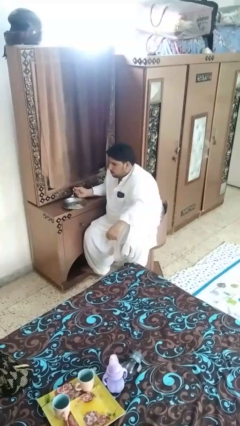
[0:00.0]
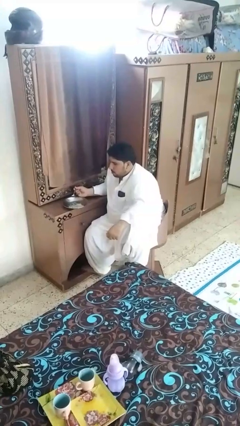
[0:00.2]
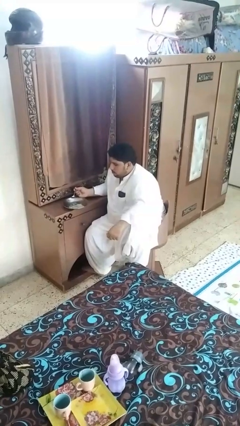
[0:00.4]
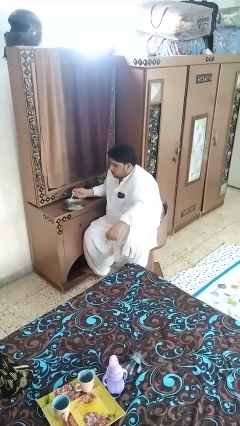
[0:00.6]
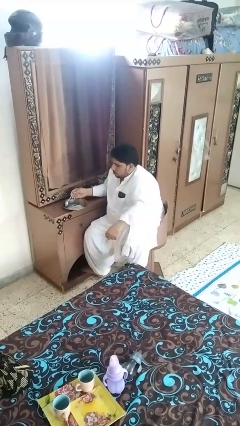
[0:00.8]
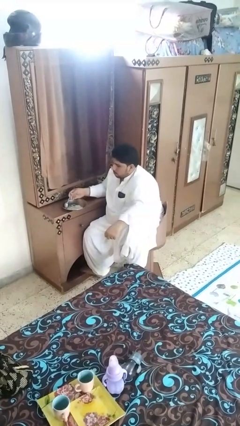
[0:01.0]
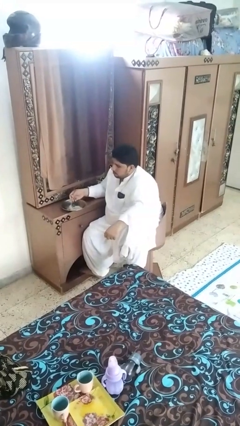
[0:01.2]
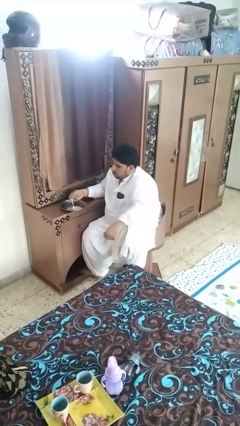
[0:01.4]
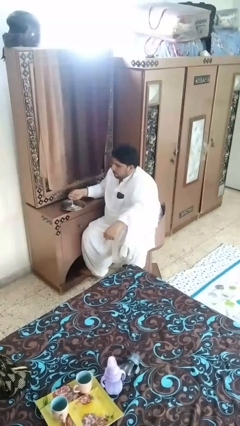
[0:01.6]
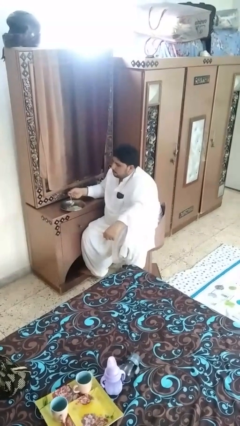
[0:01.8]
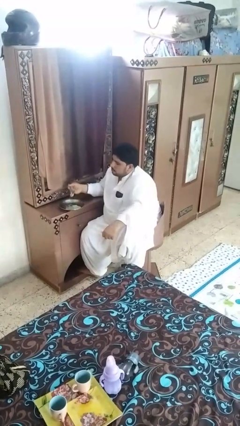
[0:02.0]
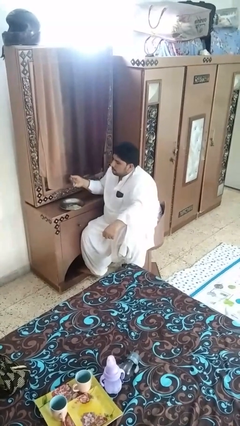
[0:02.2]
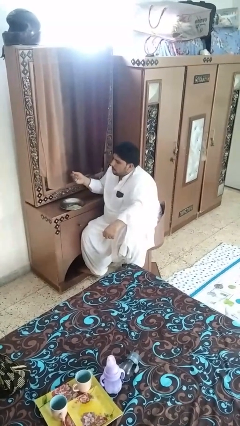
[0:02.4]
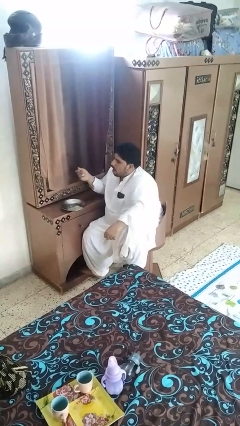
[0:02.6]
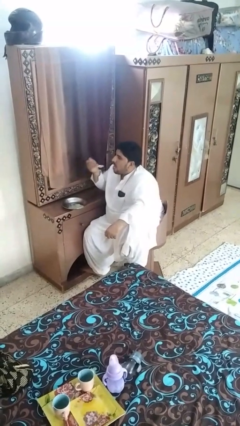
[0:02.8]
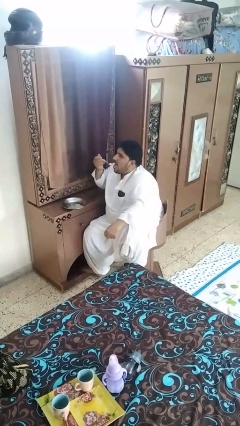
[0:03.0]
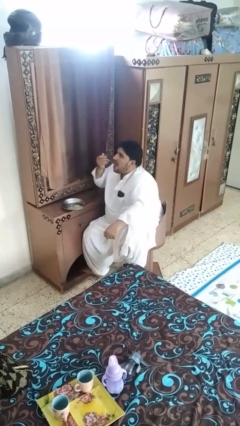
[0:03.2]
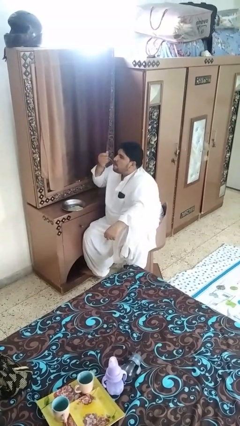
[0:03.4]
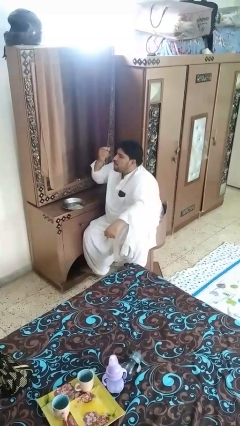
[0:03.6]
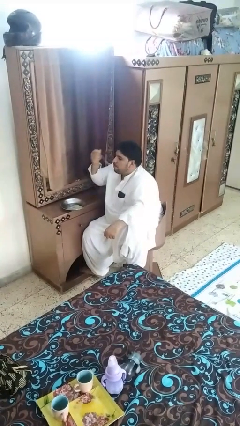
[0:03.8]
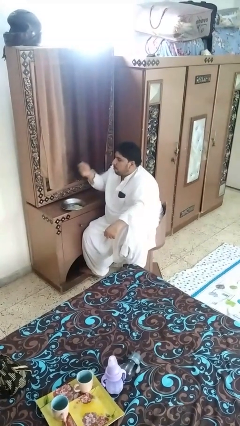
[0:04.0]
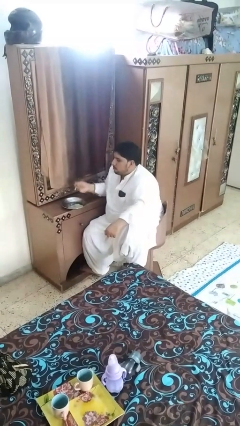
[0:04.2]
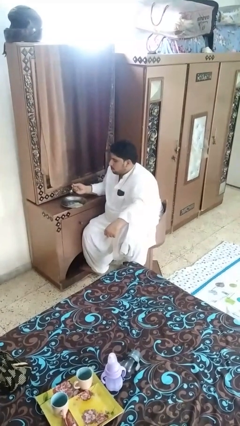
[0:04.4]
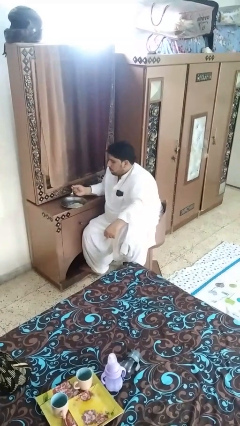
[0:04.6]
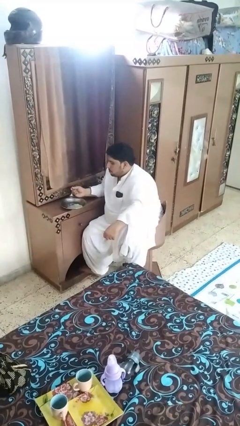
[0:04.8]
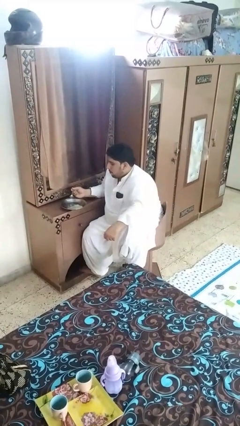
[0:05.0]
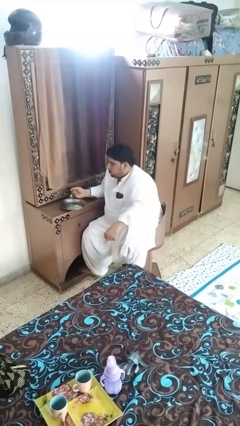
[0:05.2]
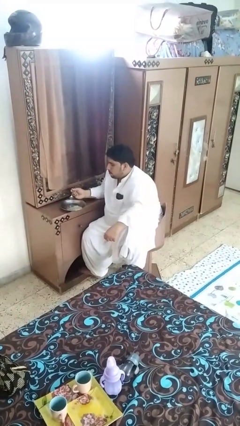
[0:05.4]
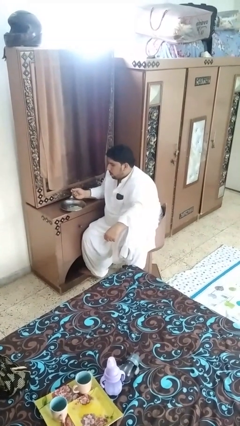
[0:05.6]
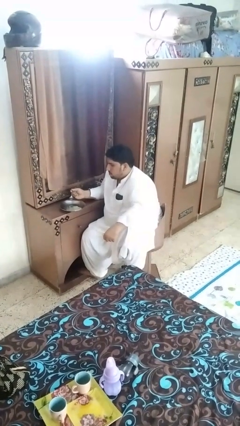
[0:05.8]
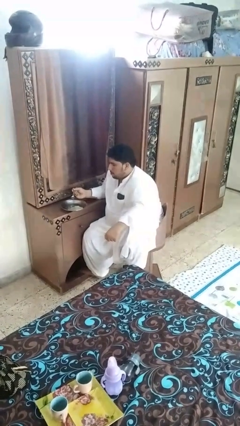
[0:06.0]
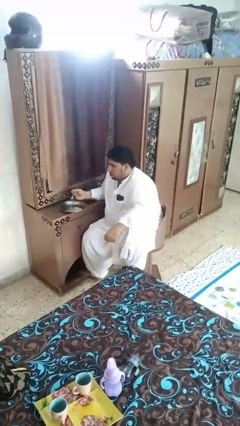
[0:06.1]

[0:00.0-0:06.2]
person eats with utensil

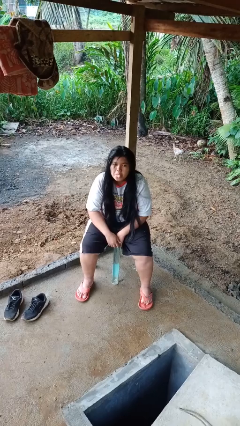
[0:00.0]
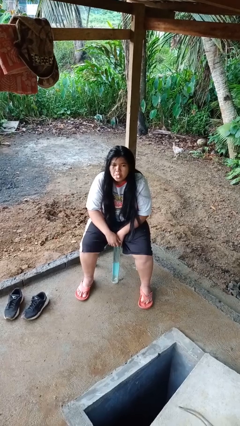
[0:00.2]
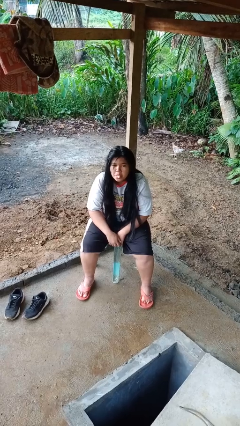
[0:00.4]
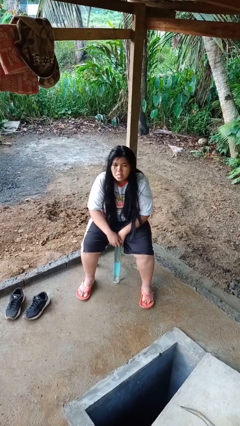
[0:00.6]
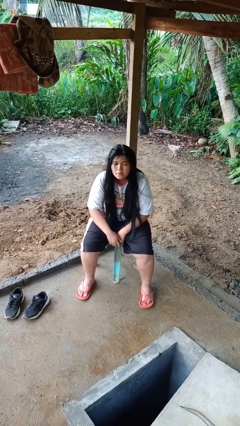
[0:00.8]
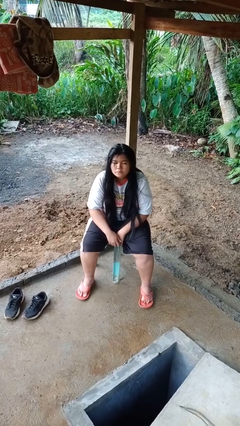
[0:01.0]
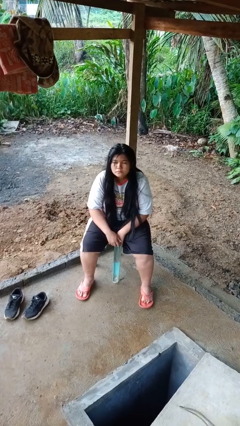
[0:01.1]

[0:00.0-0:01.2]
person sticks out tongue

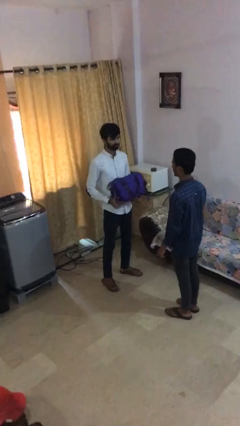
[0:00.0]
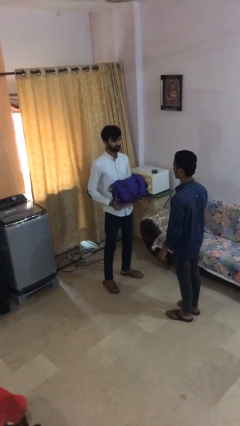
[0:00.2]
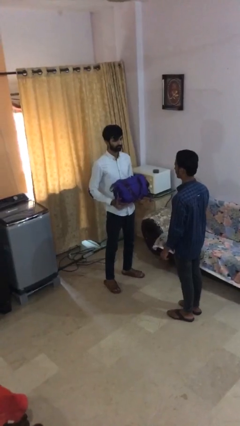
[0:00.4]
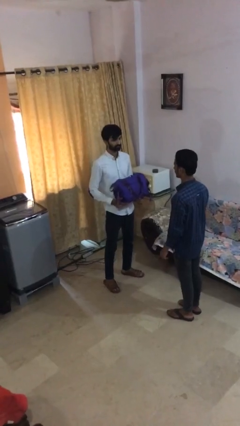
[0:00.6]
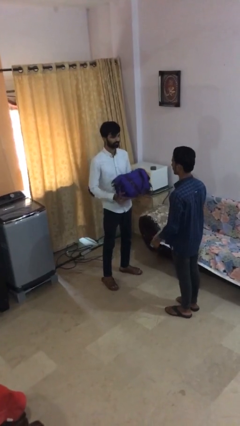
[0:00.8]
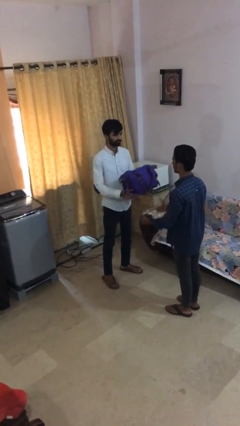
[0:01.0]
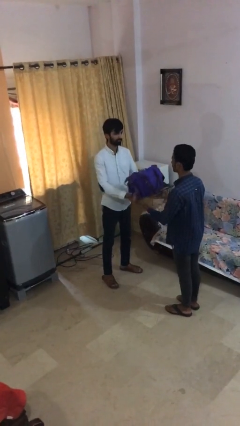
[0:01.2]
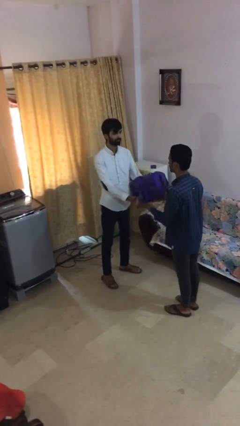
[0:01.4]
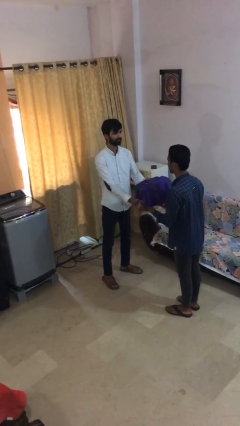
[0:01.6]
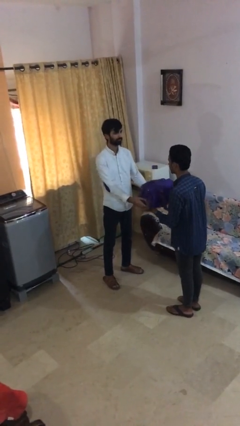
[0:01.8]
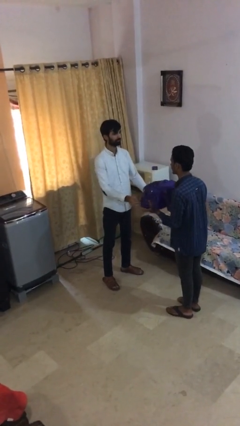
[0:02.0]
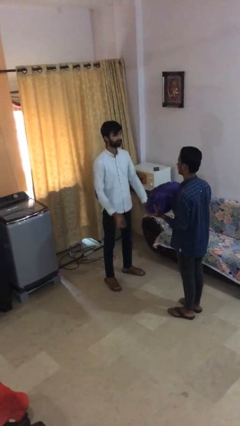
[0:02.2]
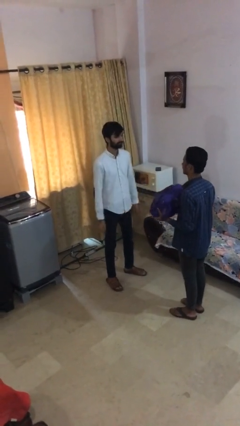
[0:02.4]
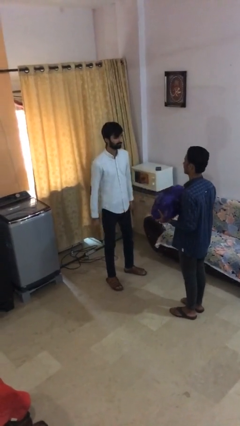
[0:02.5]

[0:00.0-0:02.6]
person transfers object to person

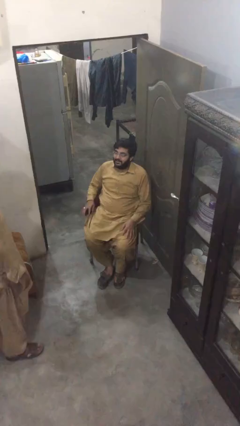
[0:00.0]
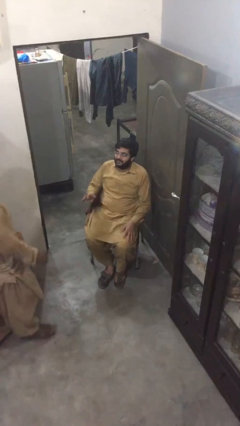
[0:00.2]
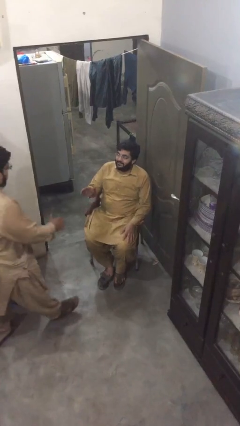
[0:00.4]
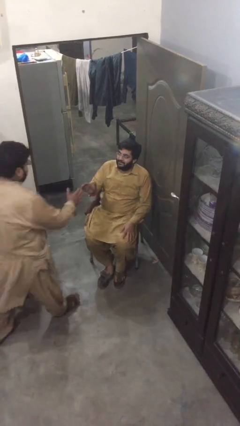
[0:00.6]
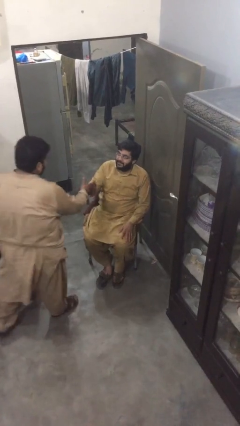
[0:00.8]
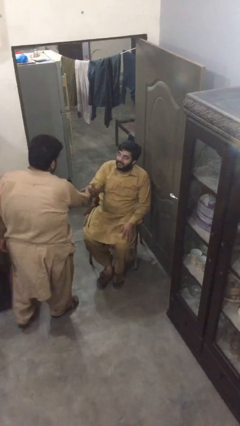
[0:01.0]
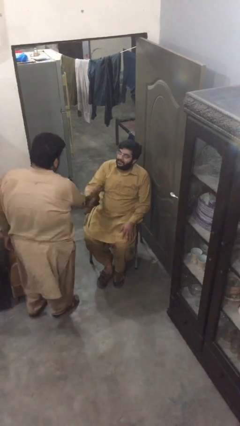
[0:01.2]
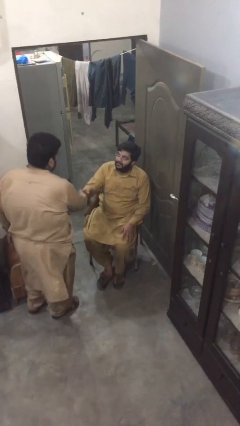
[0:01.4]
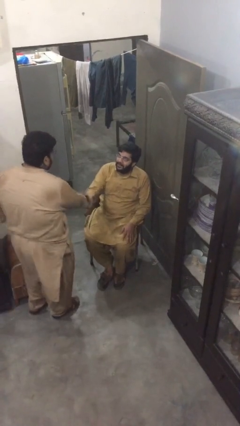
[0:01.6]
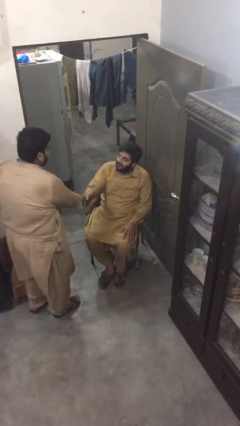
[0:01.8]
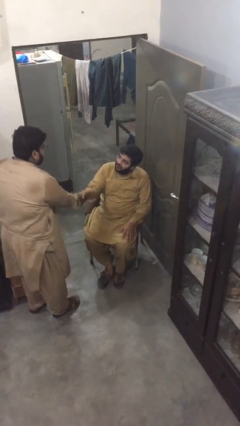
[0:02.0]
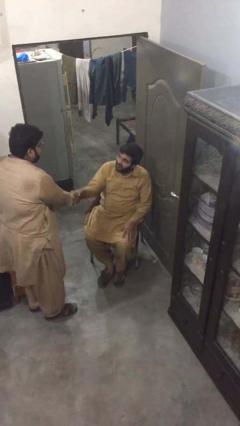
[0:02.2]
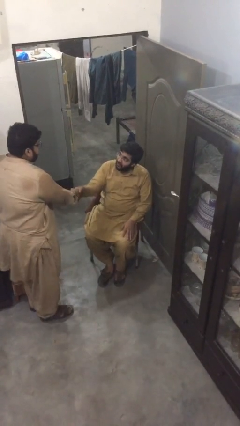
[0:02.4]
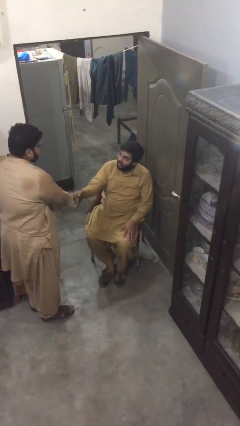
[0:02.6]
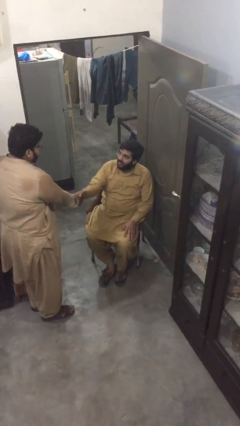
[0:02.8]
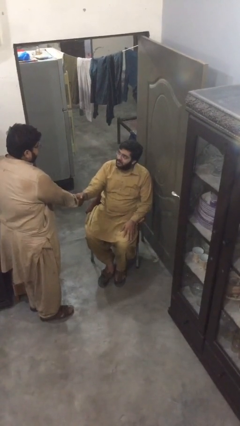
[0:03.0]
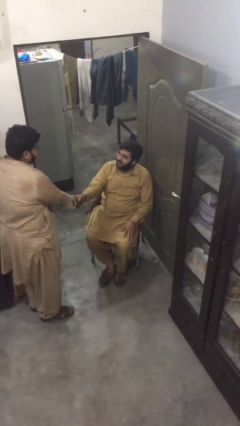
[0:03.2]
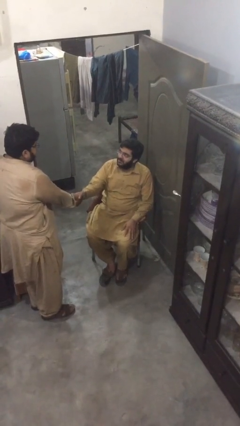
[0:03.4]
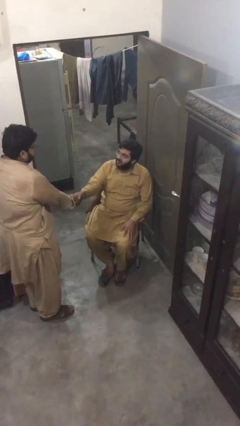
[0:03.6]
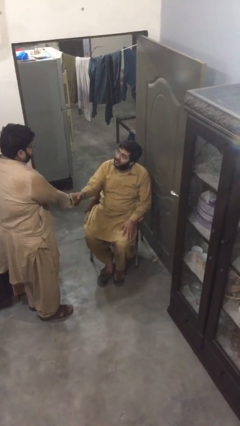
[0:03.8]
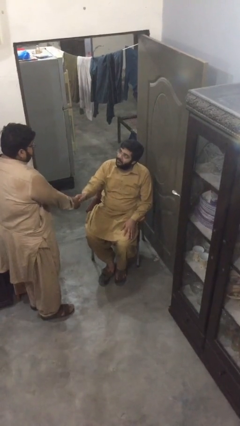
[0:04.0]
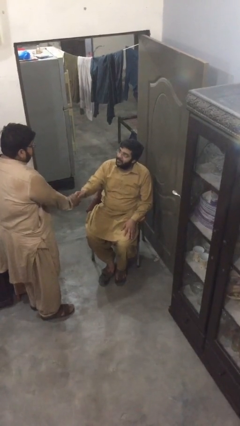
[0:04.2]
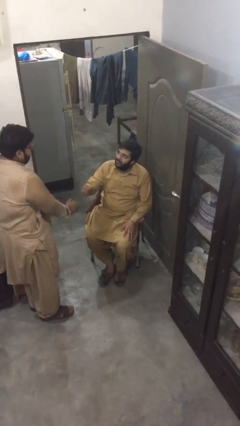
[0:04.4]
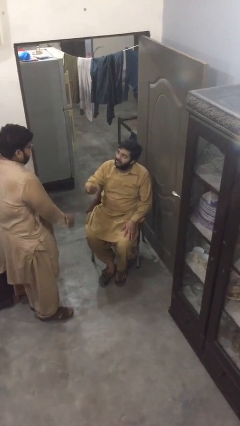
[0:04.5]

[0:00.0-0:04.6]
person shakes hand

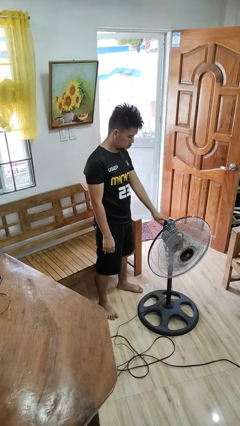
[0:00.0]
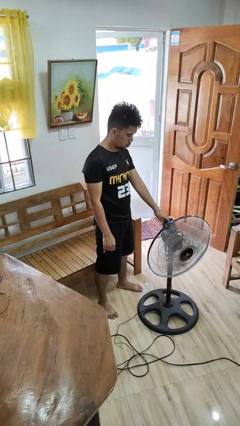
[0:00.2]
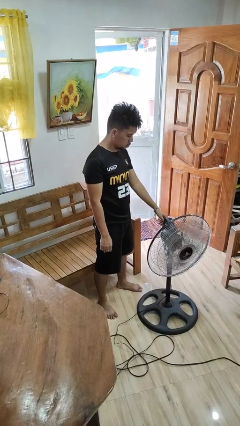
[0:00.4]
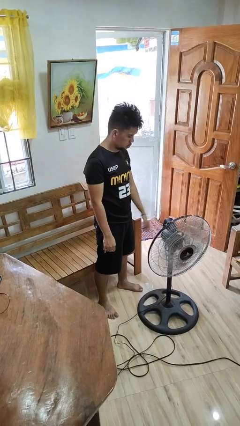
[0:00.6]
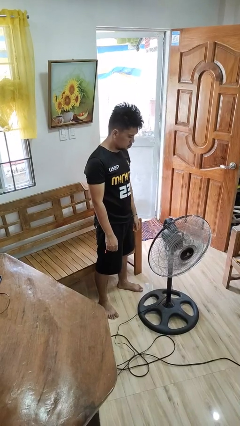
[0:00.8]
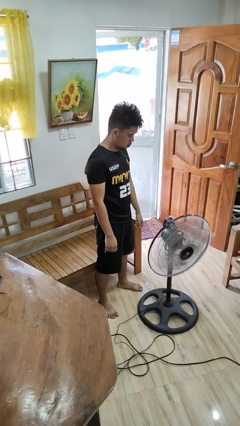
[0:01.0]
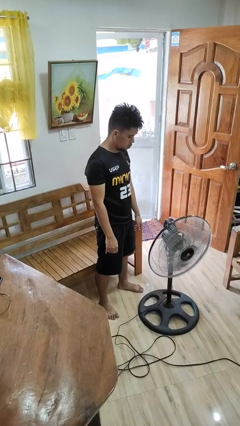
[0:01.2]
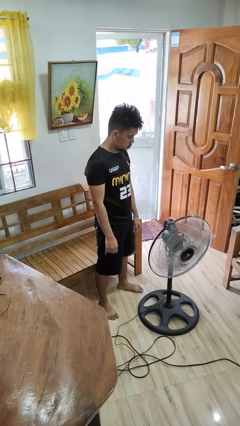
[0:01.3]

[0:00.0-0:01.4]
person turns off fan

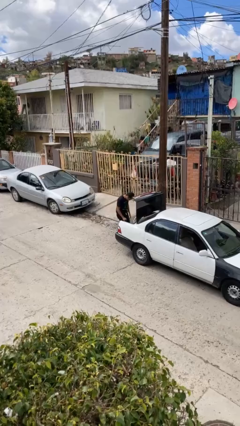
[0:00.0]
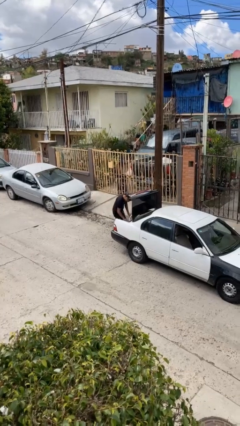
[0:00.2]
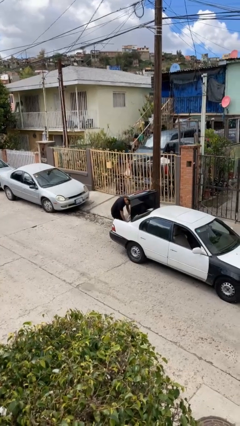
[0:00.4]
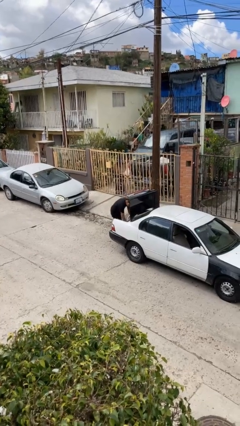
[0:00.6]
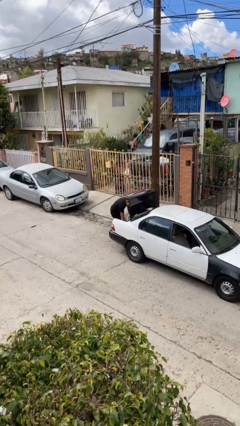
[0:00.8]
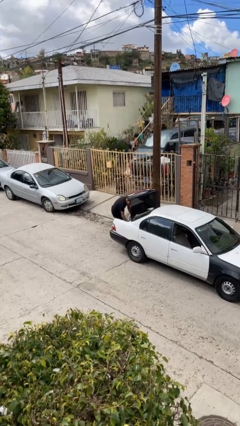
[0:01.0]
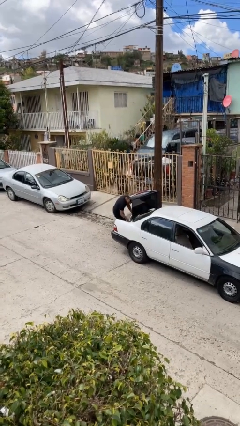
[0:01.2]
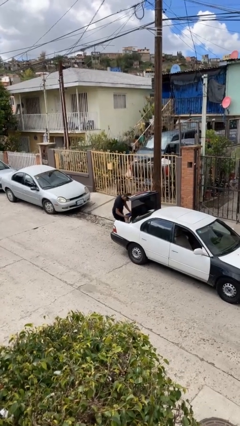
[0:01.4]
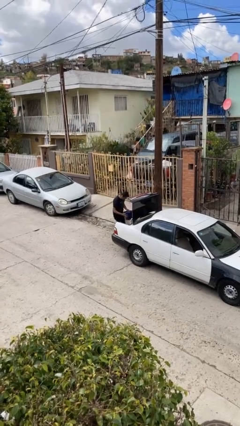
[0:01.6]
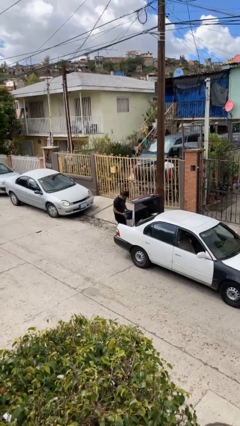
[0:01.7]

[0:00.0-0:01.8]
person unloads car
